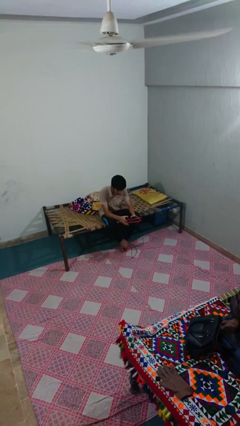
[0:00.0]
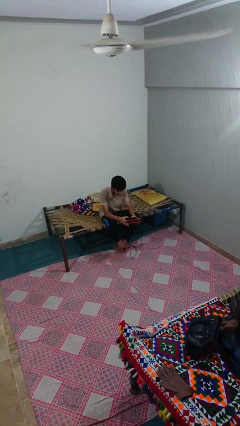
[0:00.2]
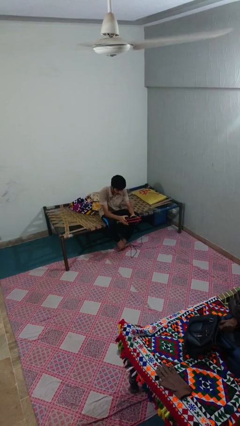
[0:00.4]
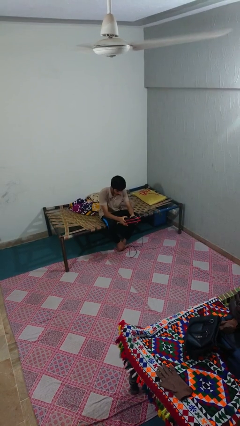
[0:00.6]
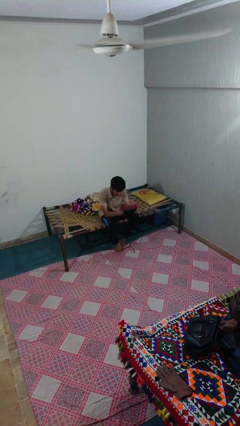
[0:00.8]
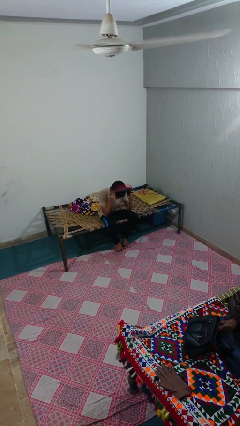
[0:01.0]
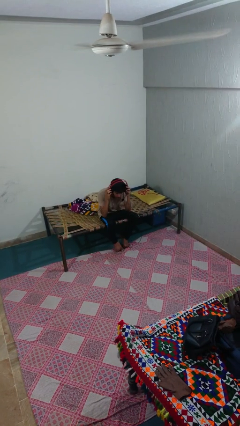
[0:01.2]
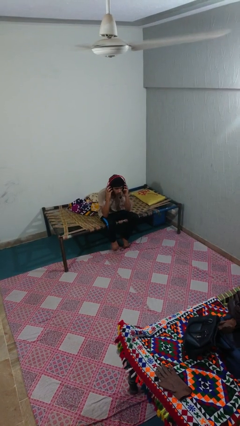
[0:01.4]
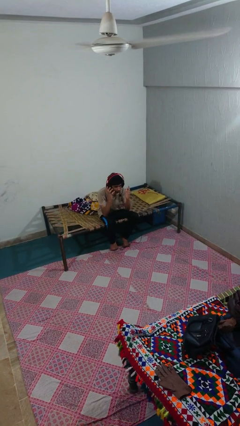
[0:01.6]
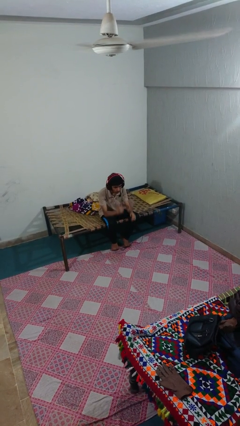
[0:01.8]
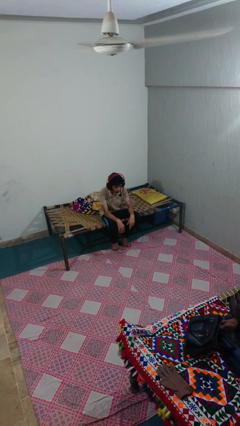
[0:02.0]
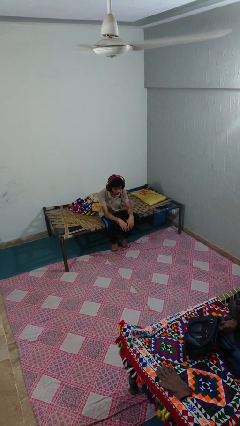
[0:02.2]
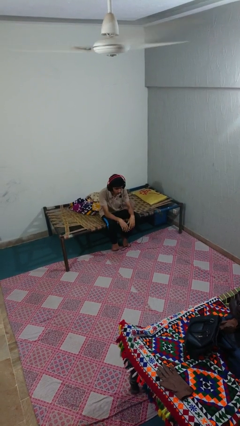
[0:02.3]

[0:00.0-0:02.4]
person puts on headphones

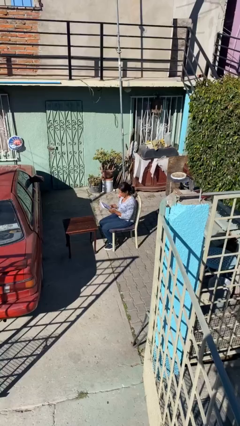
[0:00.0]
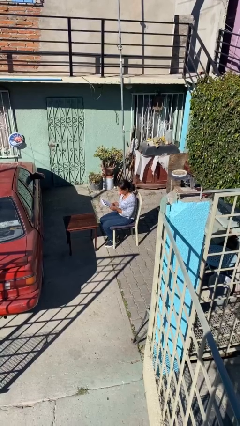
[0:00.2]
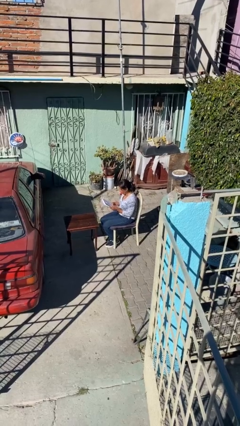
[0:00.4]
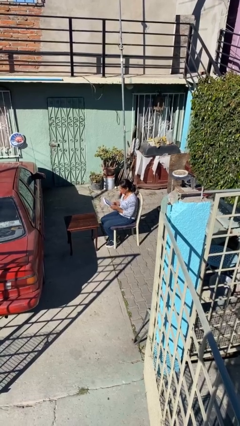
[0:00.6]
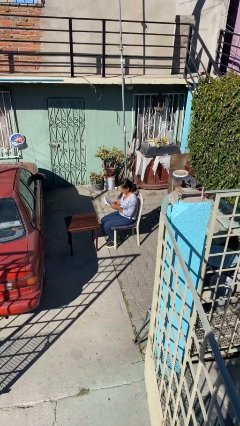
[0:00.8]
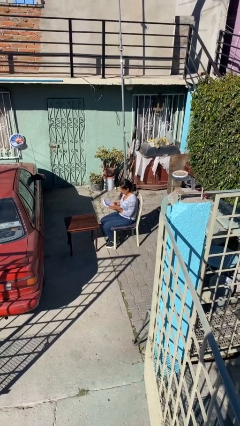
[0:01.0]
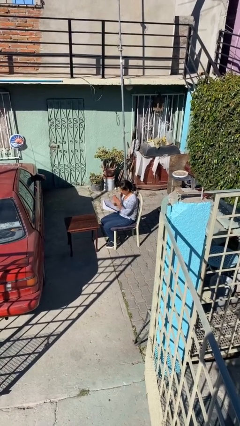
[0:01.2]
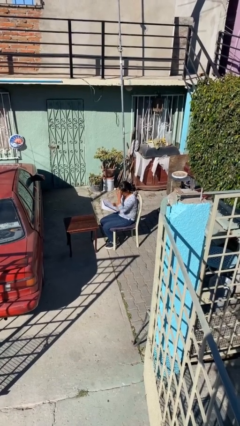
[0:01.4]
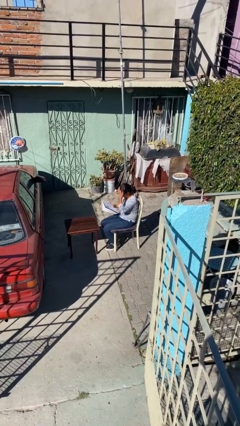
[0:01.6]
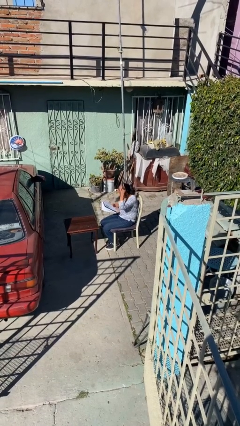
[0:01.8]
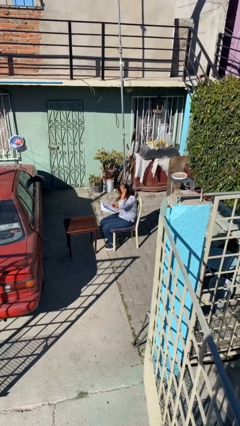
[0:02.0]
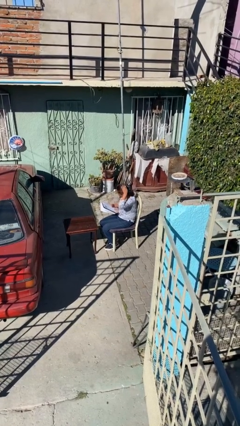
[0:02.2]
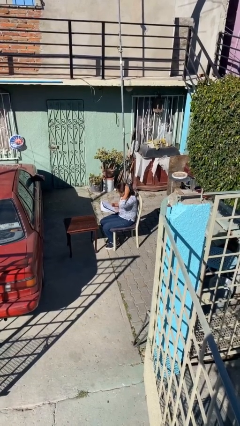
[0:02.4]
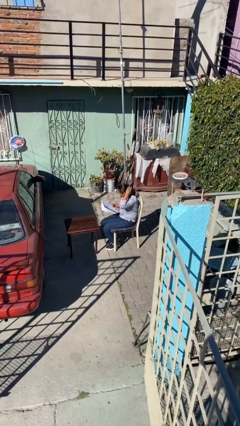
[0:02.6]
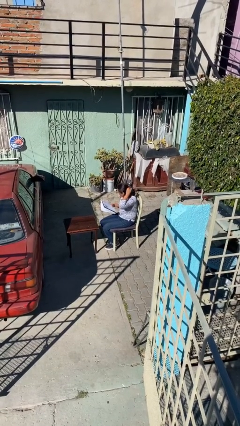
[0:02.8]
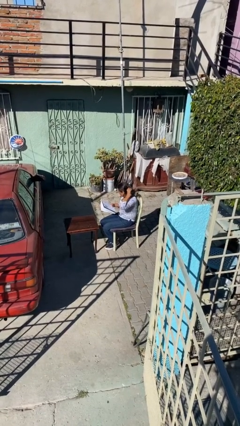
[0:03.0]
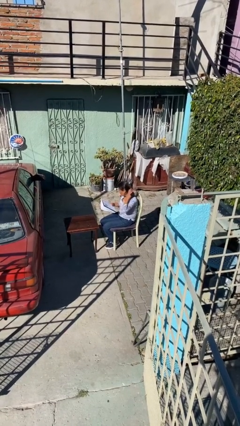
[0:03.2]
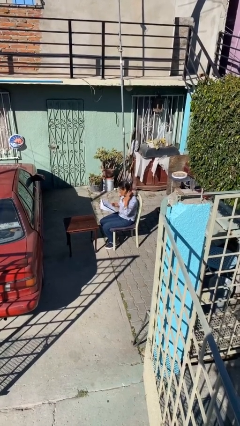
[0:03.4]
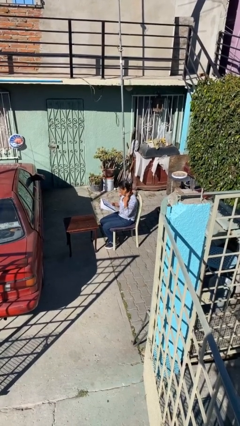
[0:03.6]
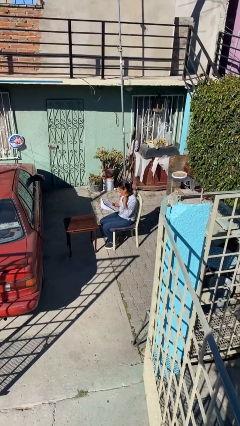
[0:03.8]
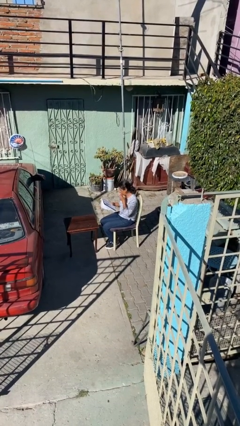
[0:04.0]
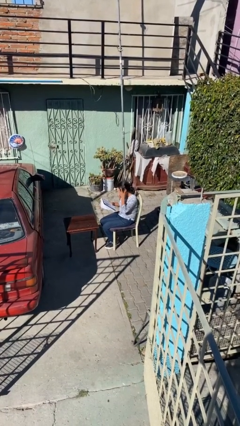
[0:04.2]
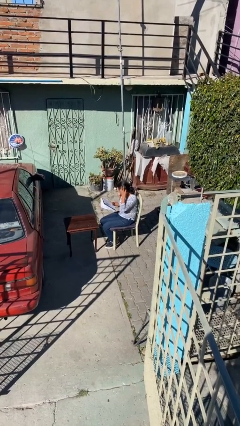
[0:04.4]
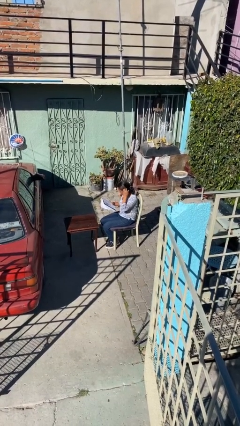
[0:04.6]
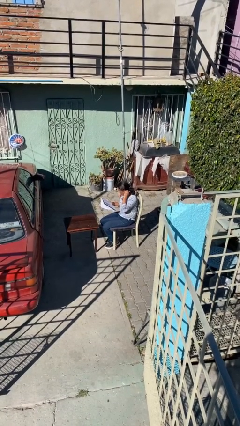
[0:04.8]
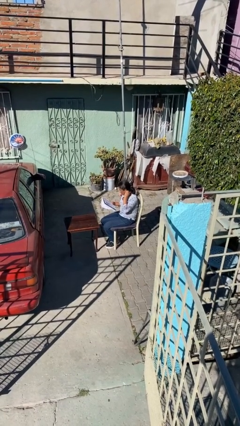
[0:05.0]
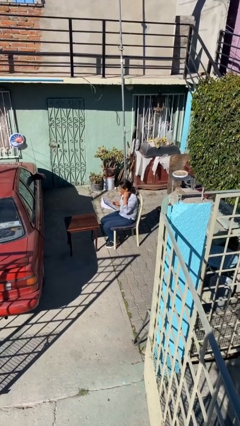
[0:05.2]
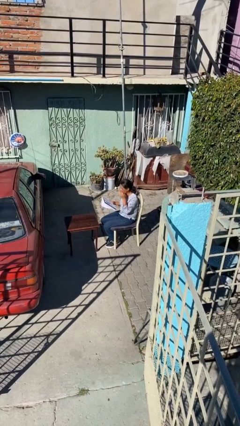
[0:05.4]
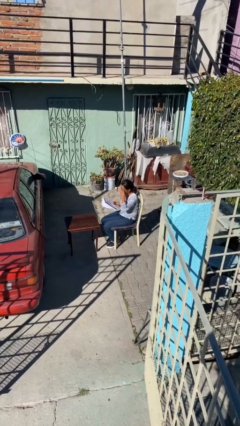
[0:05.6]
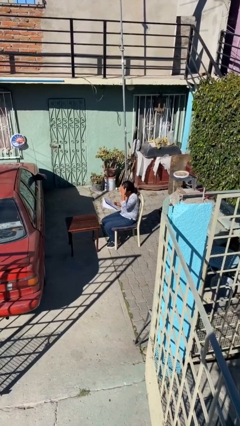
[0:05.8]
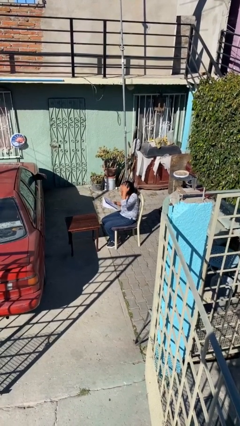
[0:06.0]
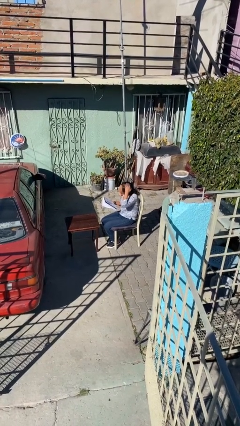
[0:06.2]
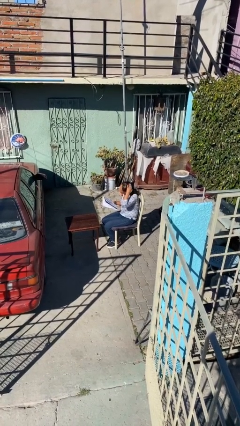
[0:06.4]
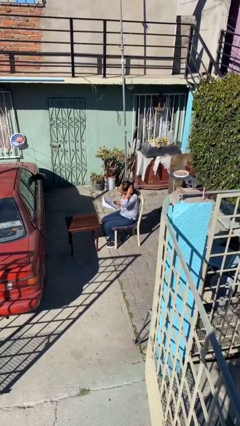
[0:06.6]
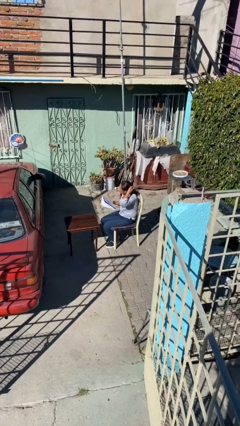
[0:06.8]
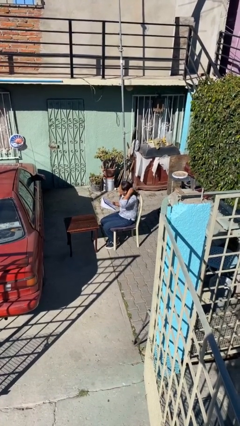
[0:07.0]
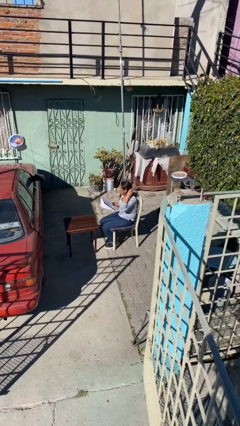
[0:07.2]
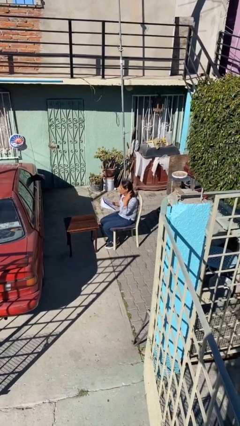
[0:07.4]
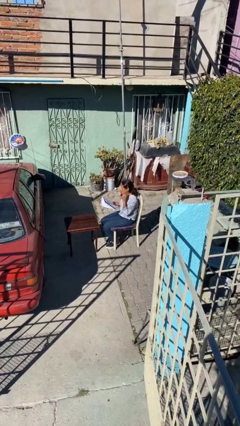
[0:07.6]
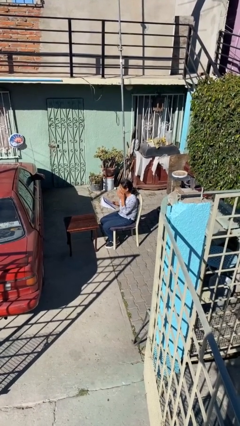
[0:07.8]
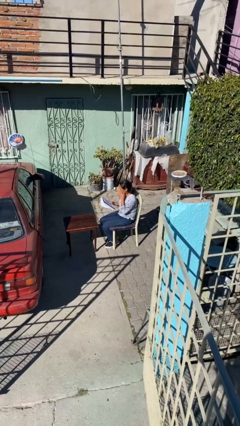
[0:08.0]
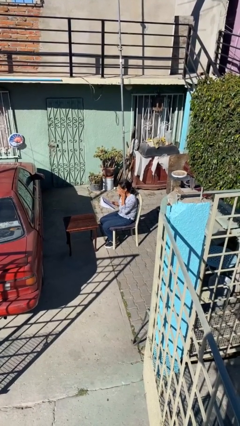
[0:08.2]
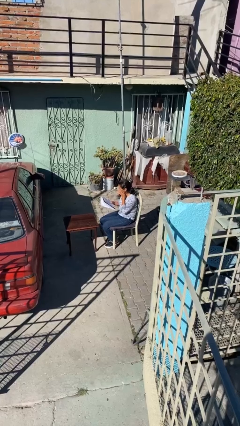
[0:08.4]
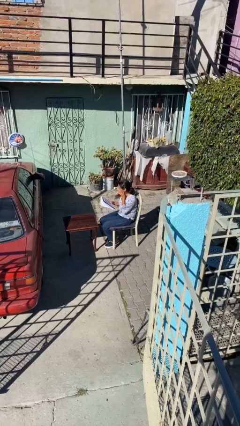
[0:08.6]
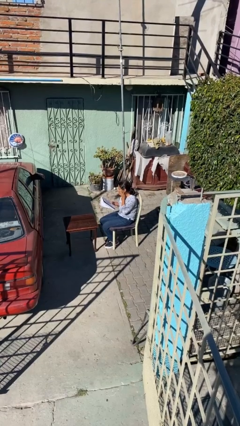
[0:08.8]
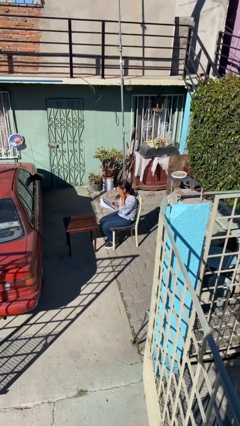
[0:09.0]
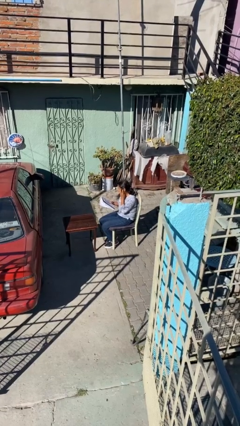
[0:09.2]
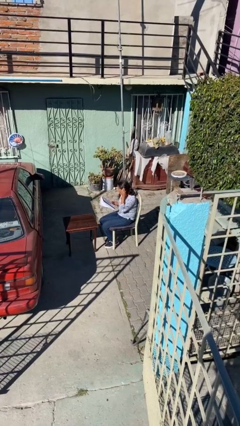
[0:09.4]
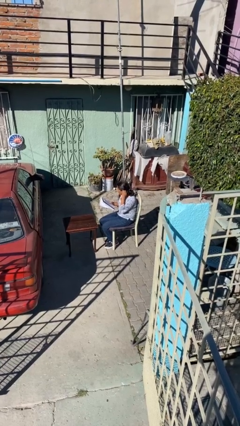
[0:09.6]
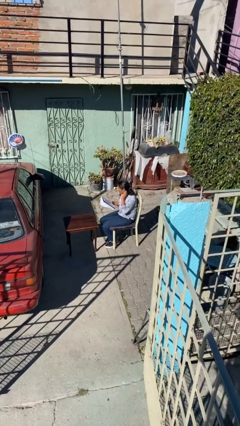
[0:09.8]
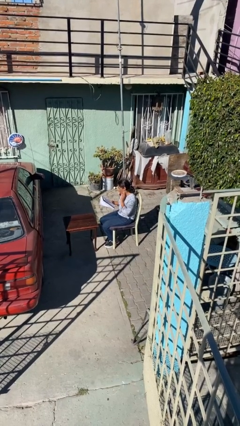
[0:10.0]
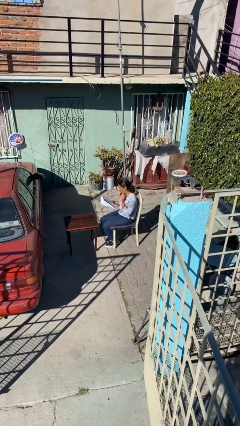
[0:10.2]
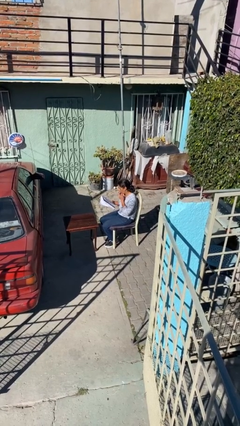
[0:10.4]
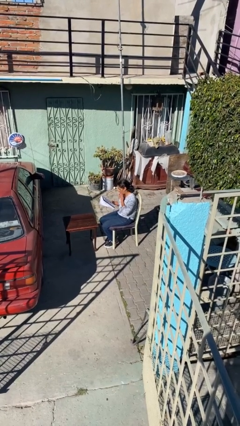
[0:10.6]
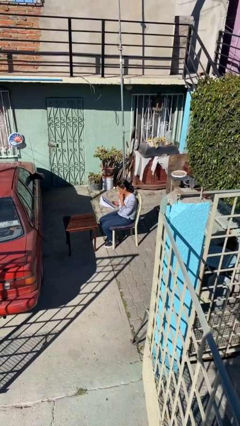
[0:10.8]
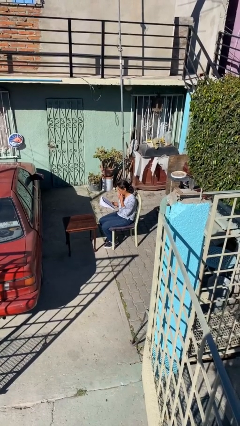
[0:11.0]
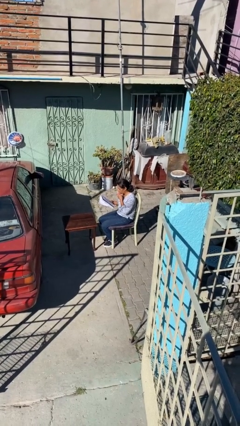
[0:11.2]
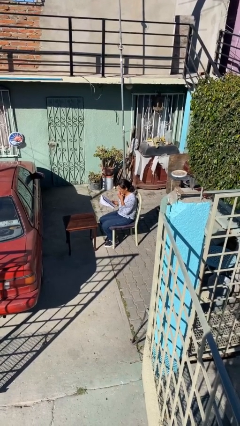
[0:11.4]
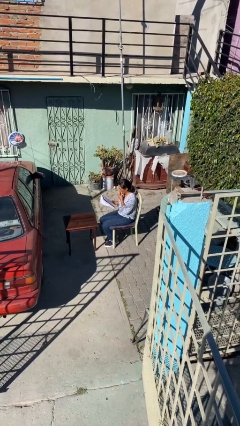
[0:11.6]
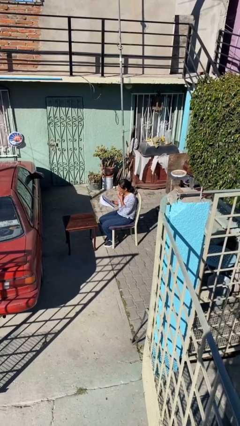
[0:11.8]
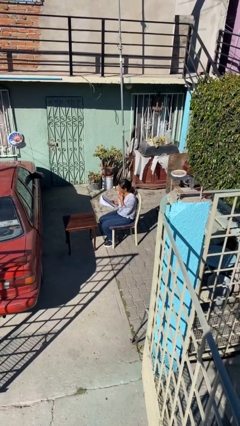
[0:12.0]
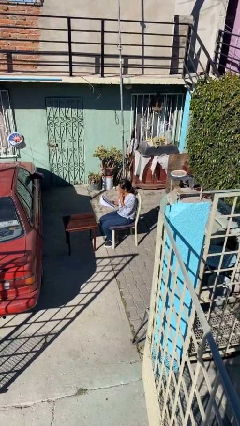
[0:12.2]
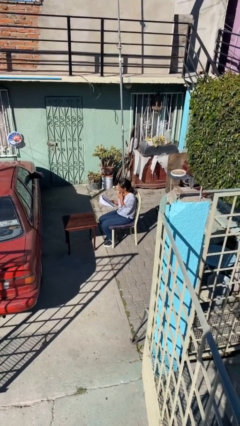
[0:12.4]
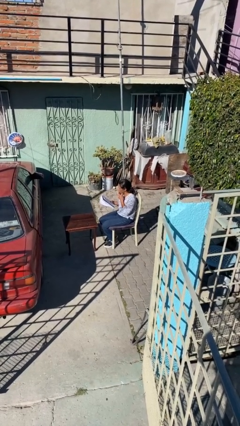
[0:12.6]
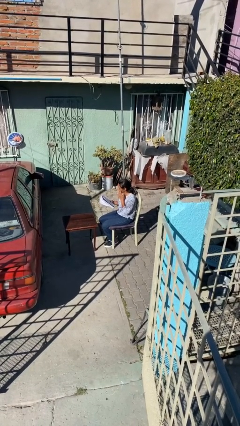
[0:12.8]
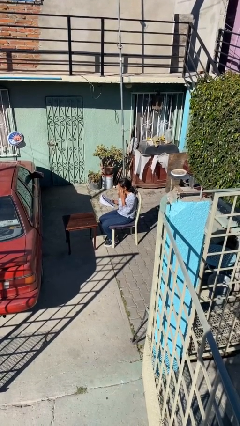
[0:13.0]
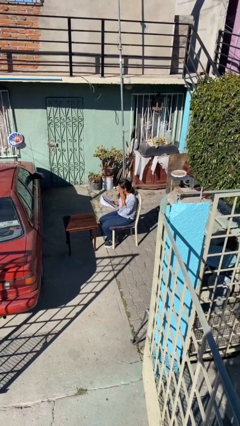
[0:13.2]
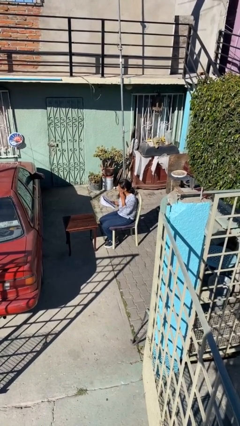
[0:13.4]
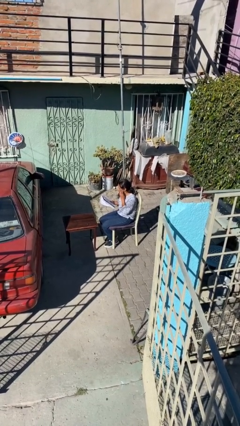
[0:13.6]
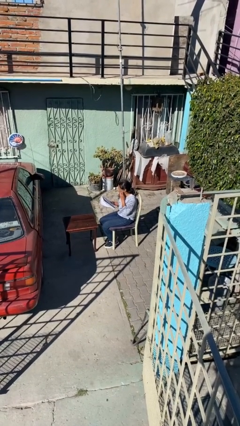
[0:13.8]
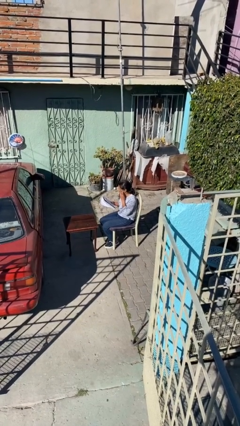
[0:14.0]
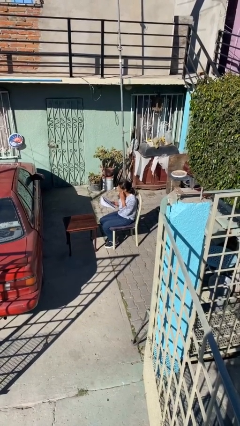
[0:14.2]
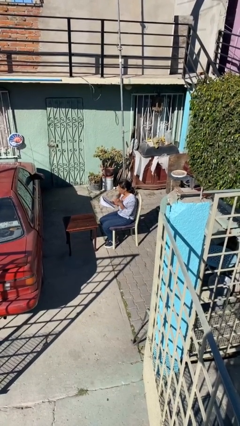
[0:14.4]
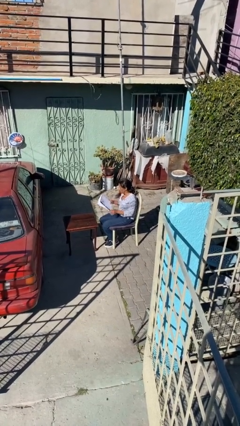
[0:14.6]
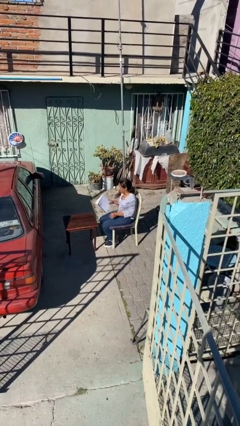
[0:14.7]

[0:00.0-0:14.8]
person reads document

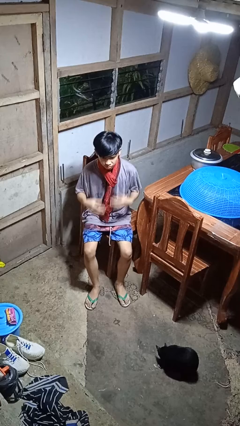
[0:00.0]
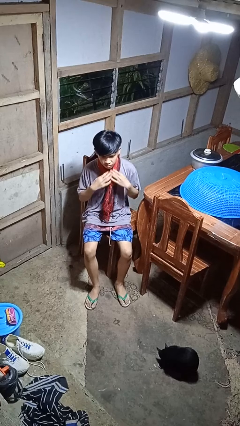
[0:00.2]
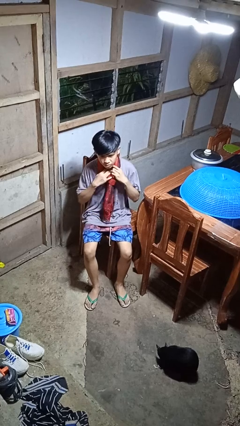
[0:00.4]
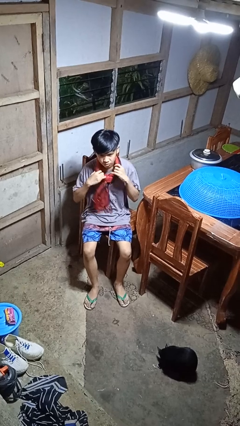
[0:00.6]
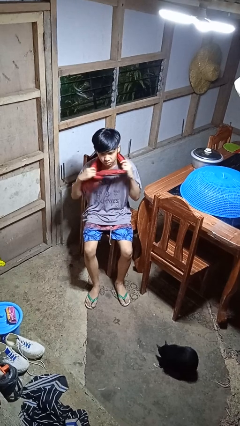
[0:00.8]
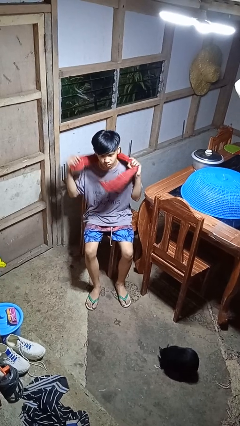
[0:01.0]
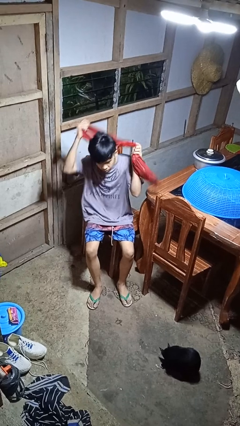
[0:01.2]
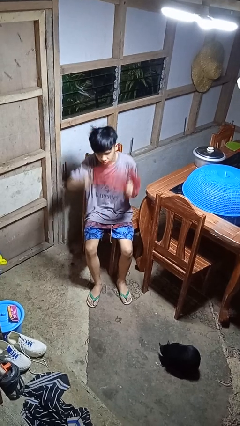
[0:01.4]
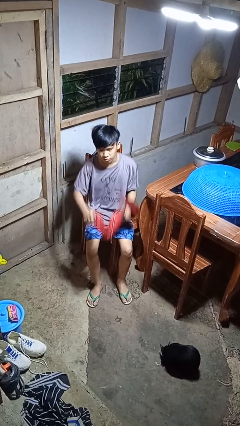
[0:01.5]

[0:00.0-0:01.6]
person takes off scarf
